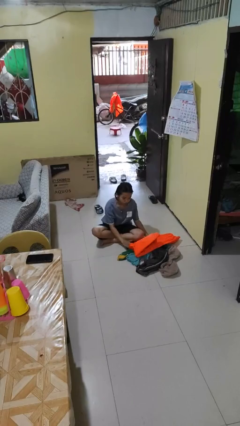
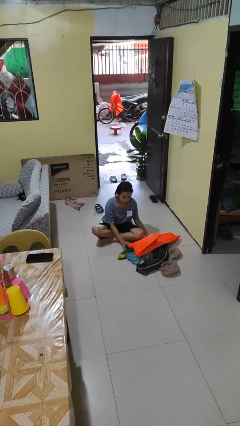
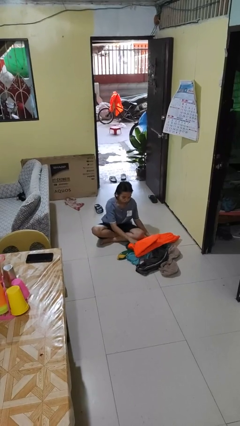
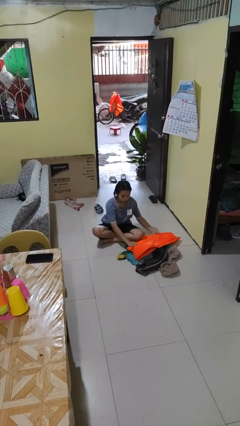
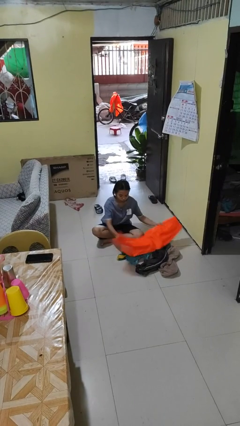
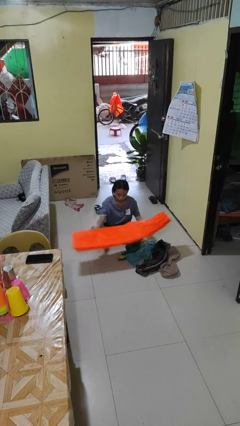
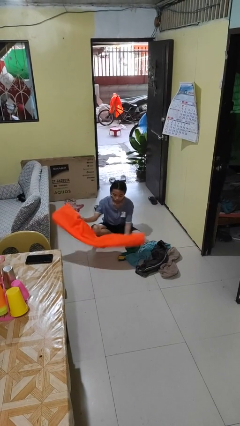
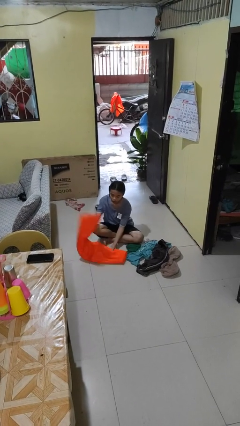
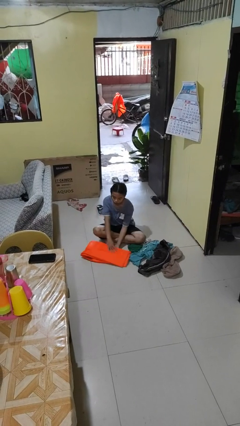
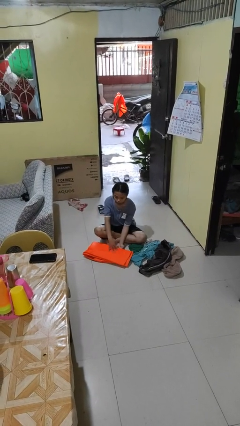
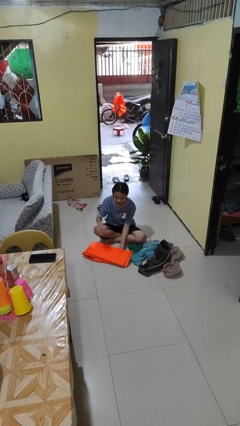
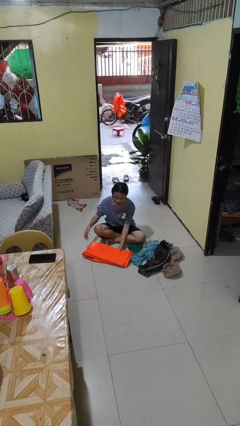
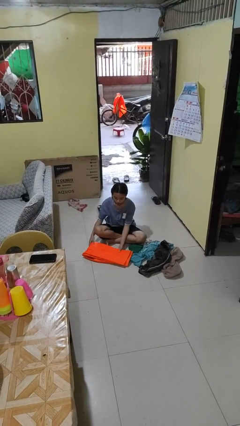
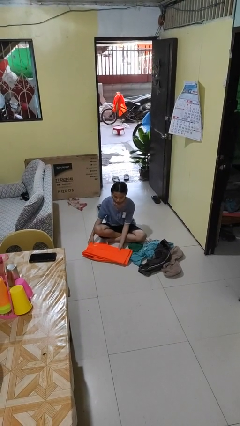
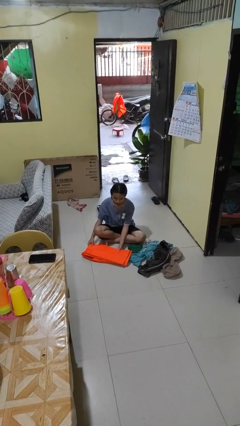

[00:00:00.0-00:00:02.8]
person folds pants

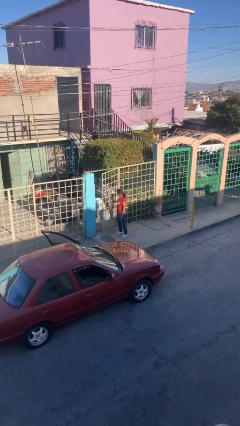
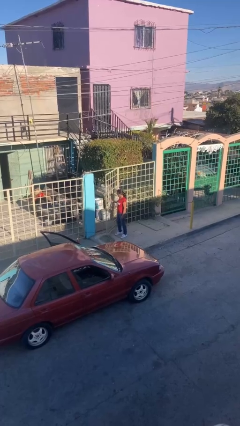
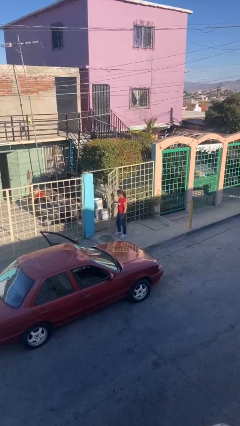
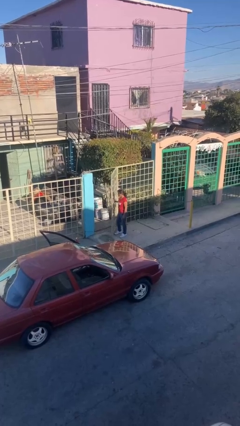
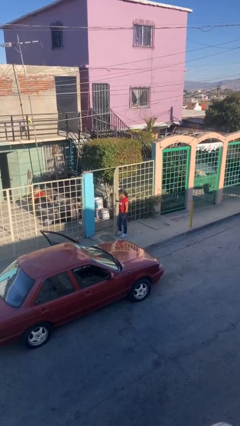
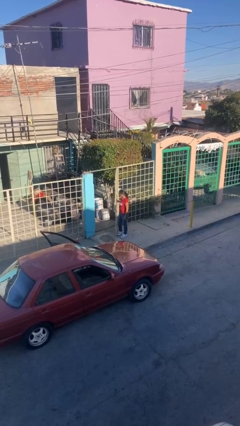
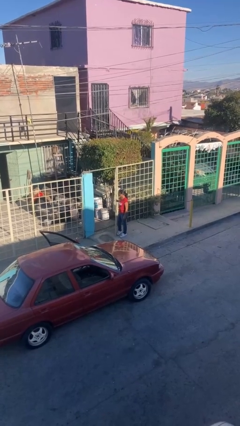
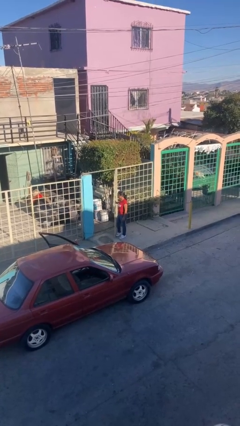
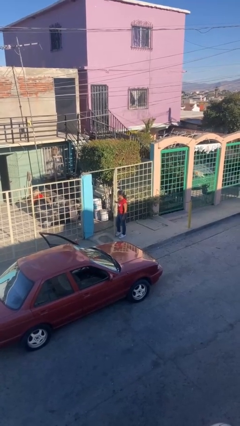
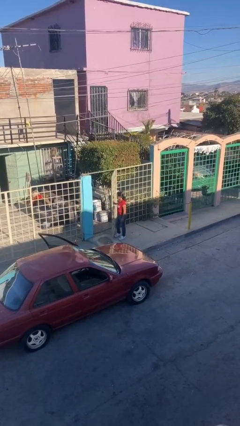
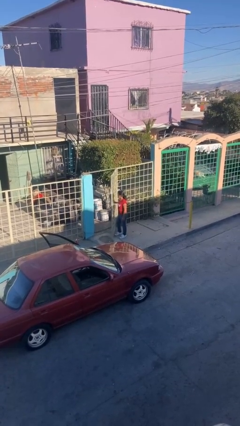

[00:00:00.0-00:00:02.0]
person opens facility door

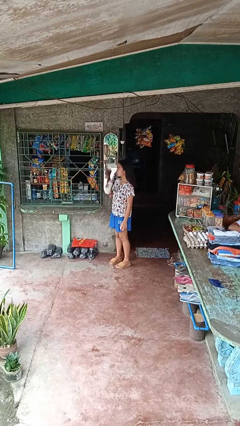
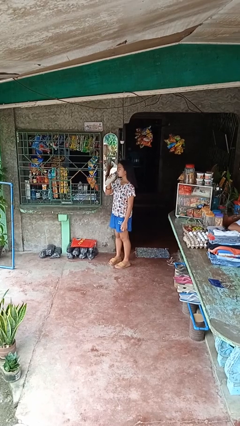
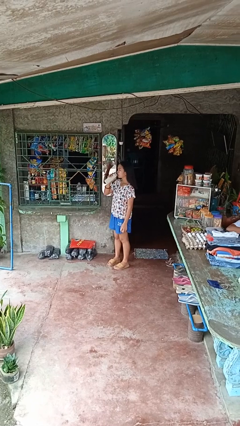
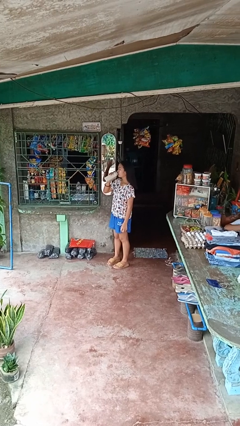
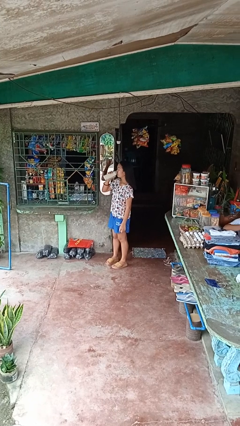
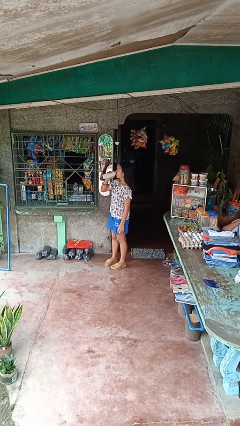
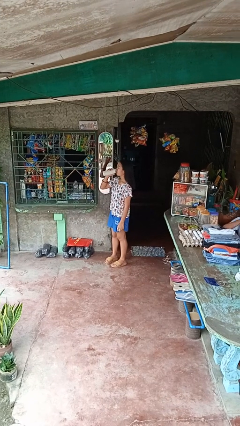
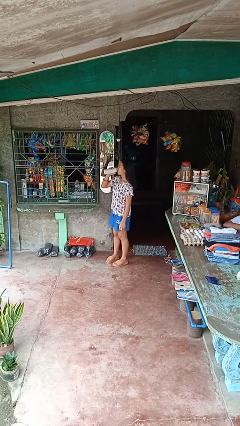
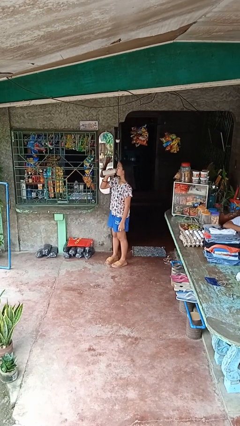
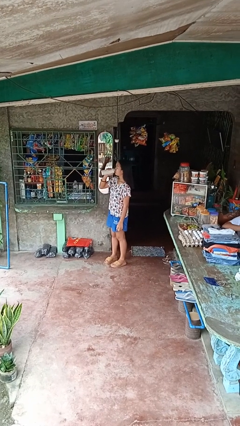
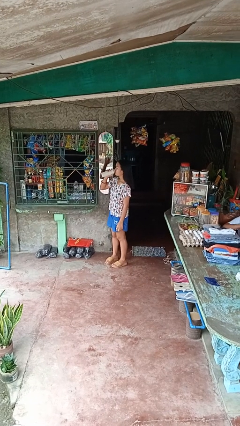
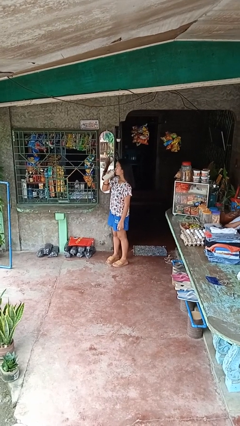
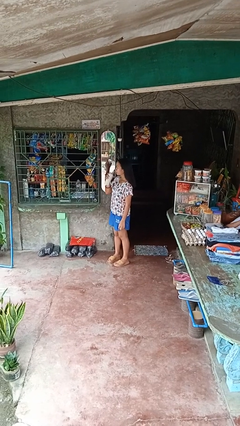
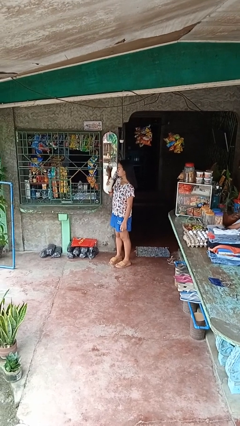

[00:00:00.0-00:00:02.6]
person drinks from bottle

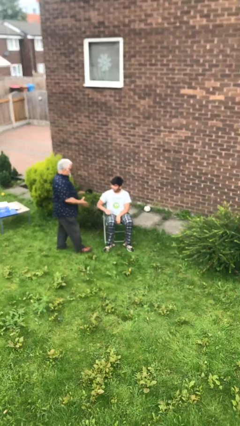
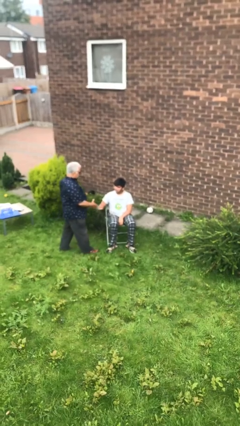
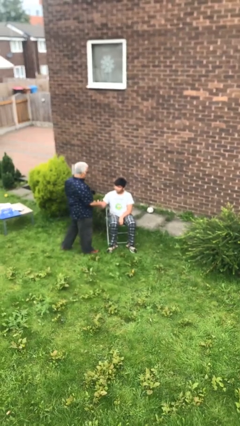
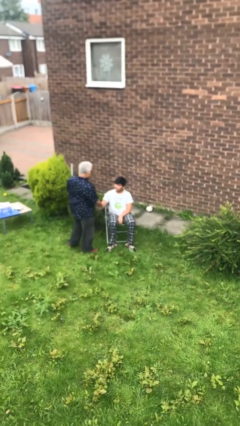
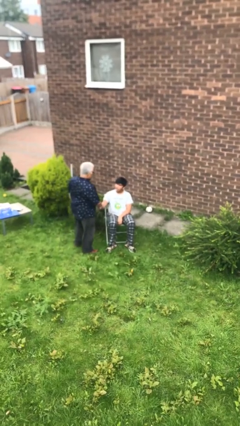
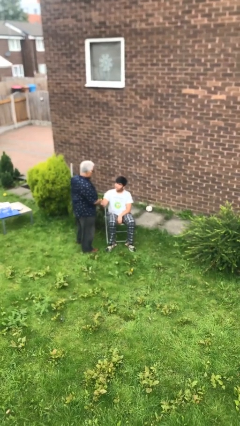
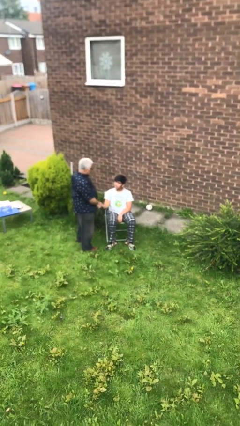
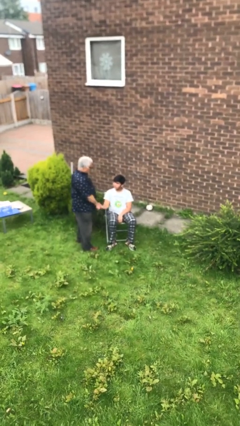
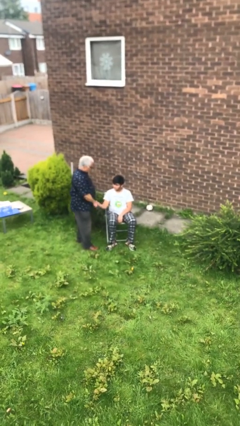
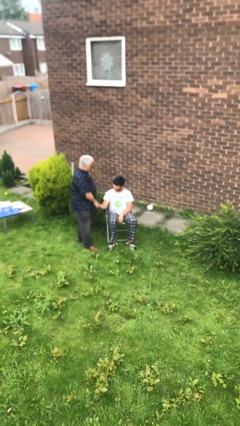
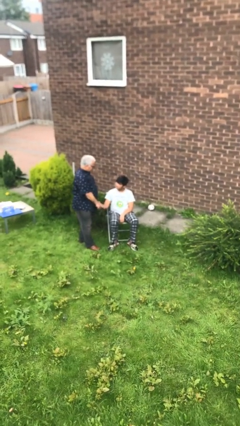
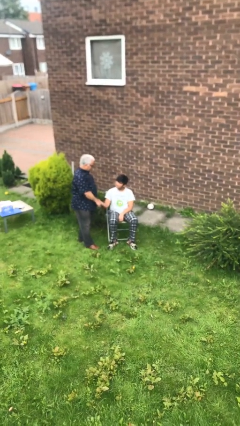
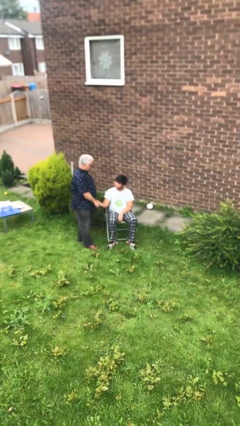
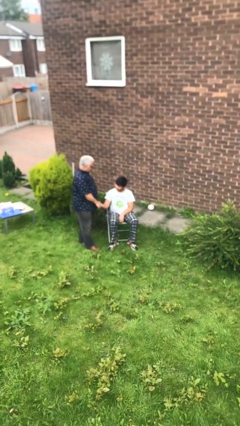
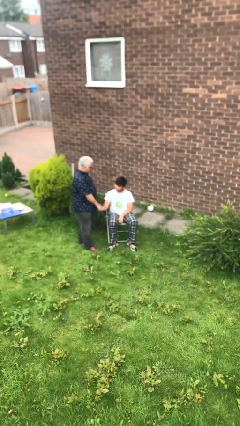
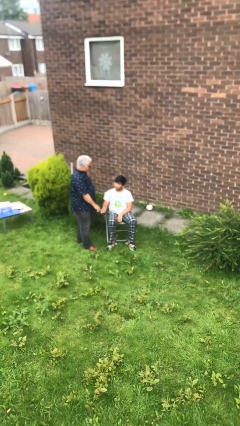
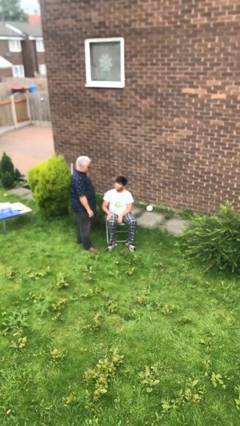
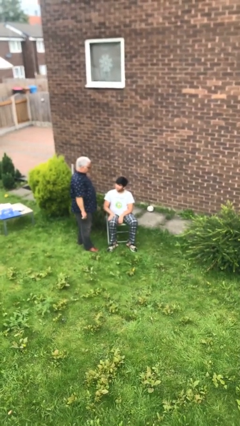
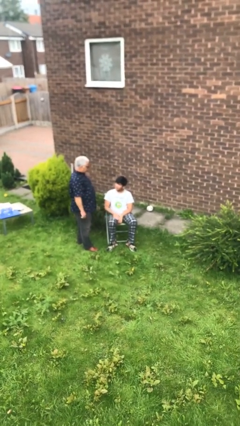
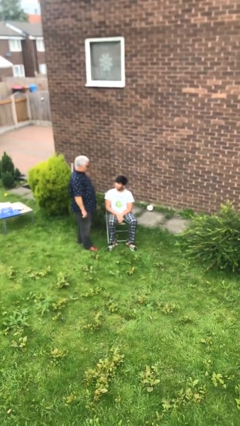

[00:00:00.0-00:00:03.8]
person shakes hand

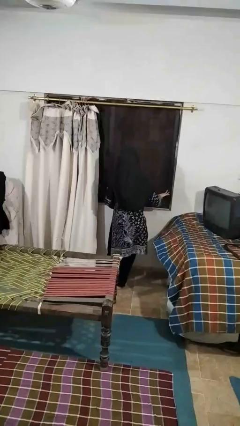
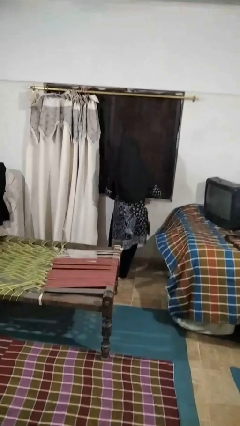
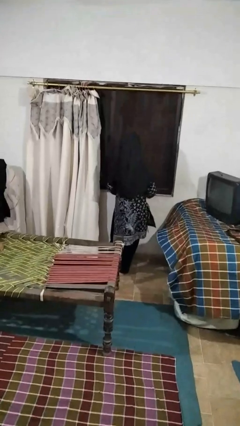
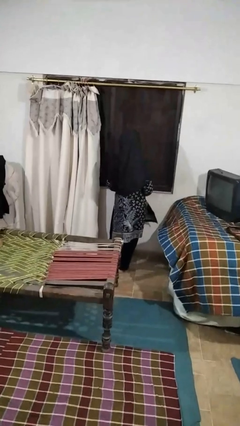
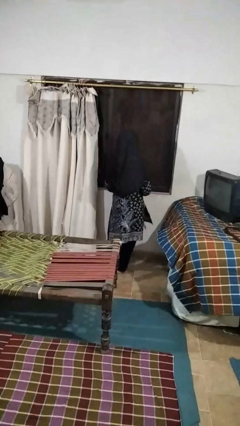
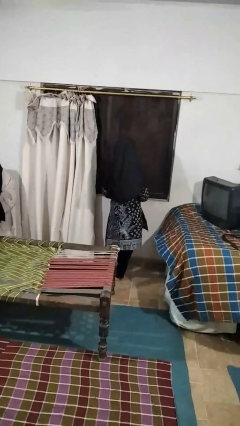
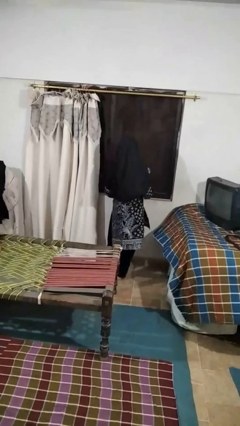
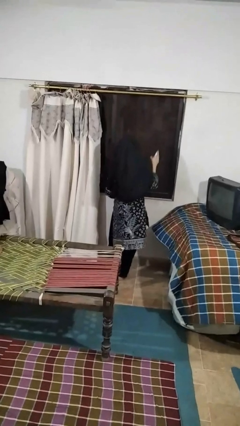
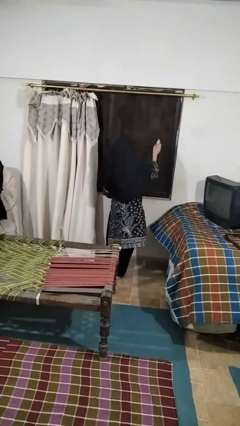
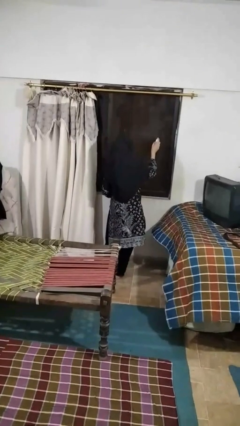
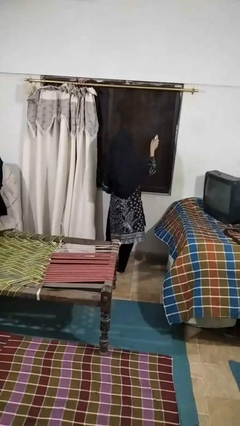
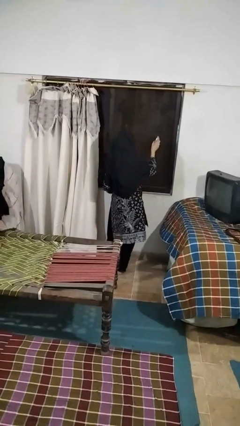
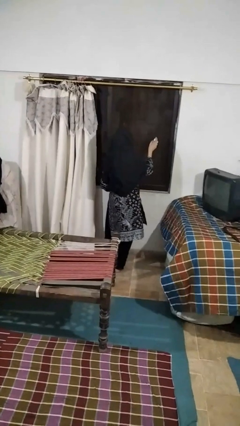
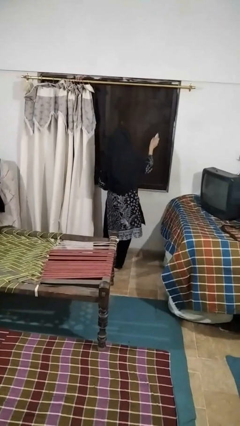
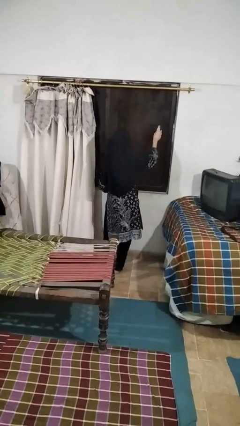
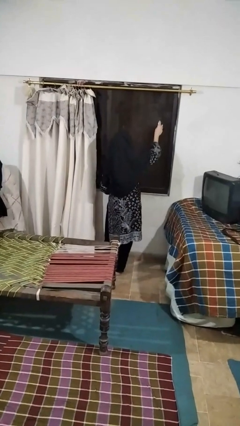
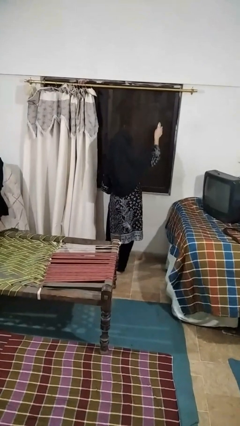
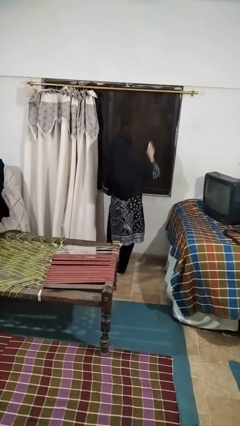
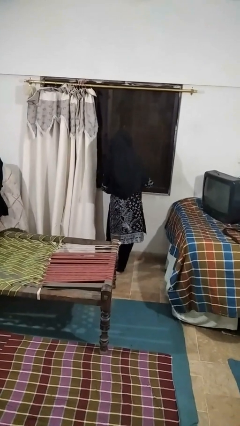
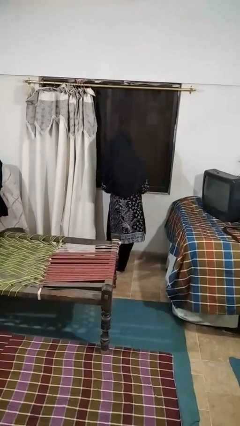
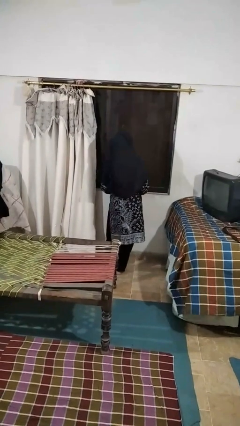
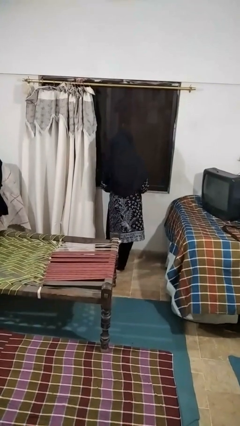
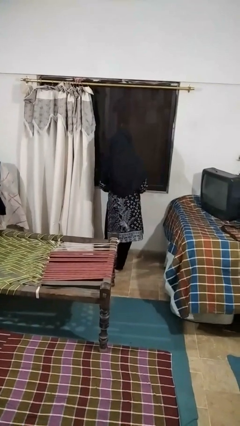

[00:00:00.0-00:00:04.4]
person sprays from bottle

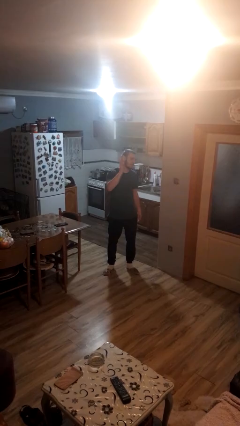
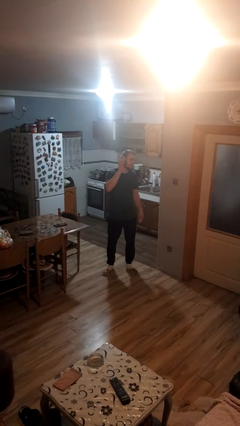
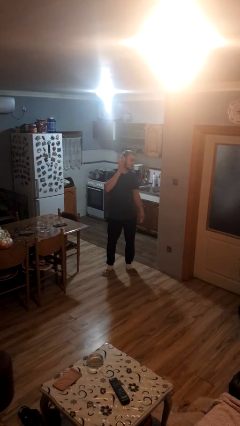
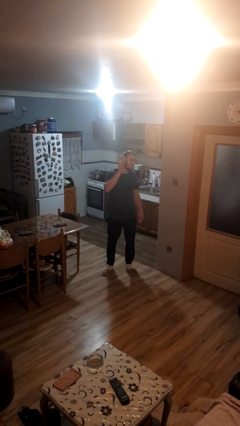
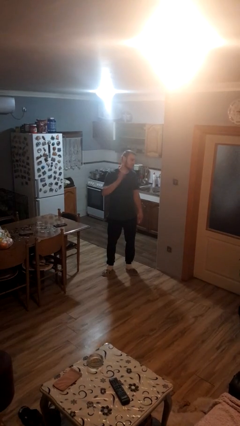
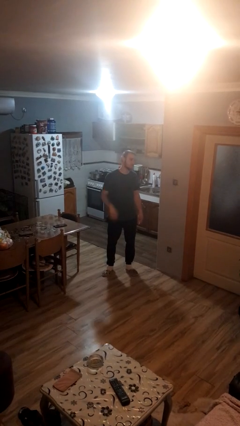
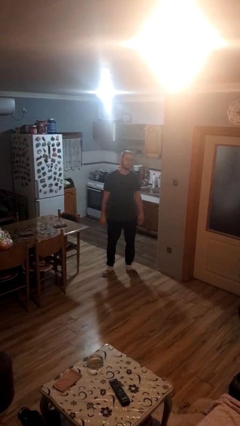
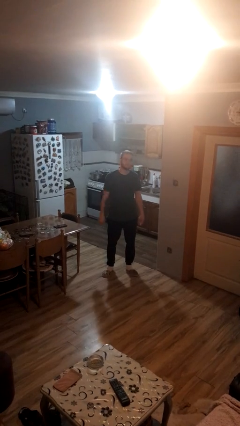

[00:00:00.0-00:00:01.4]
person waves at person
